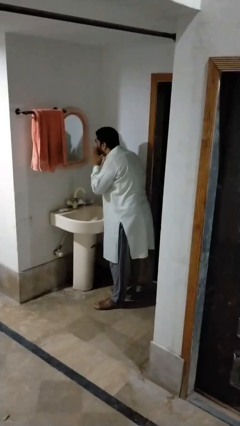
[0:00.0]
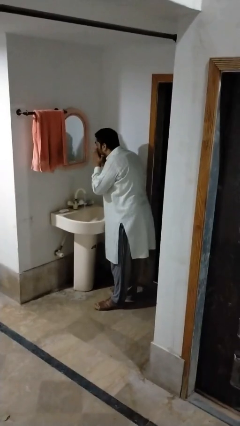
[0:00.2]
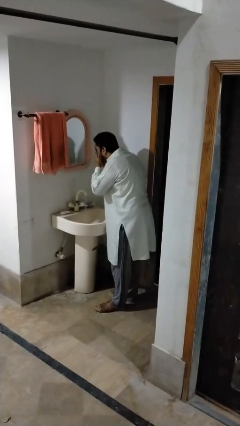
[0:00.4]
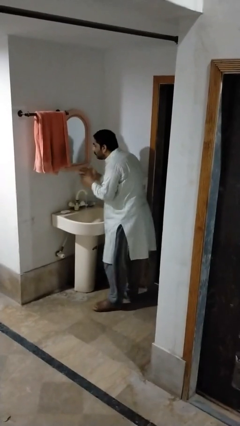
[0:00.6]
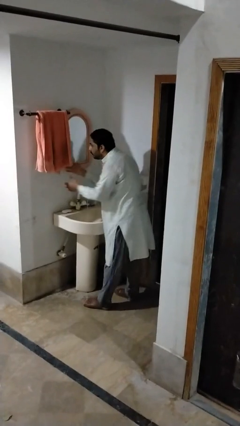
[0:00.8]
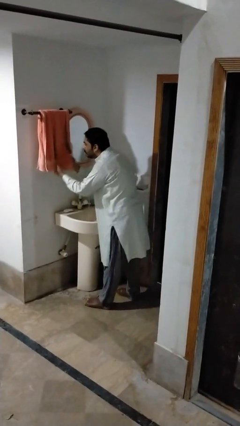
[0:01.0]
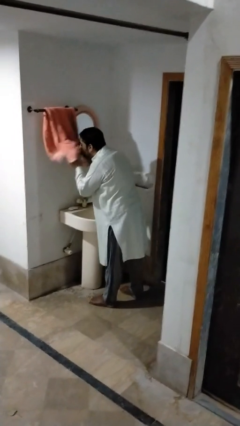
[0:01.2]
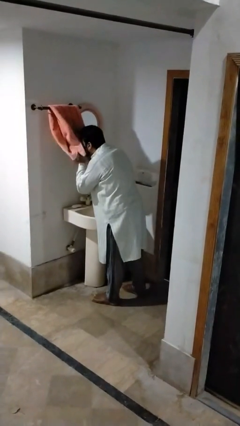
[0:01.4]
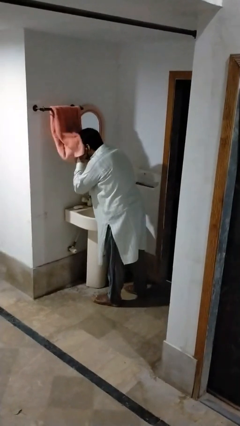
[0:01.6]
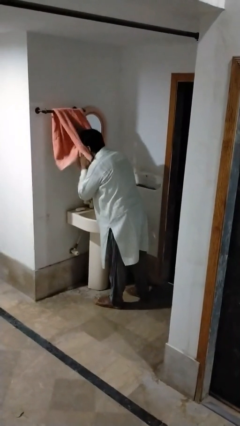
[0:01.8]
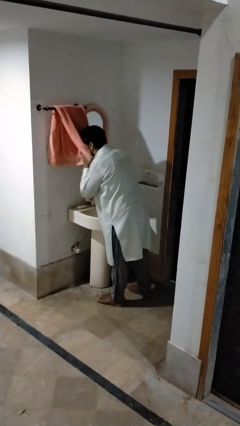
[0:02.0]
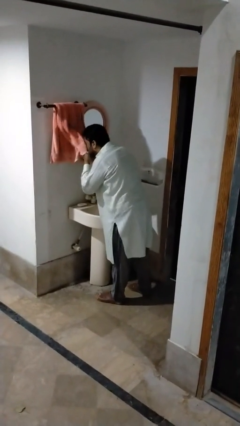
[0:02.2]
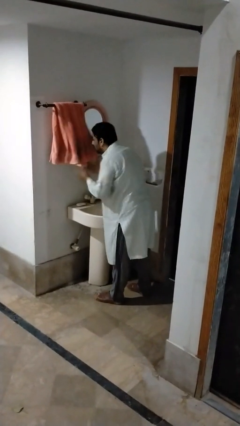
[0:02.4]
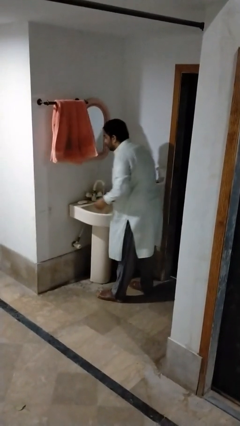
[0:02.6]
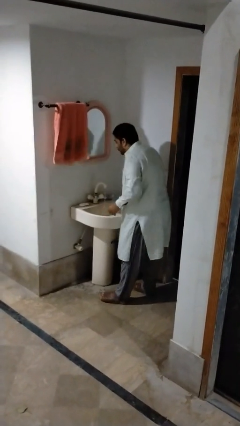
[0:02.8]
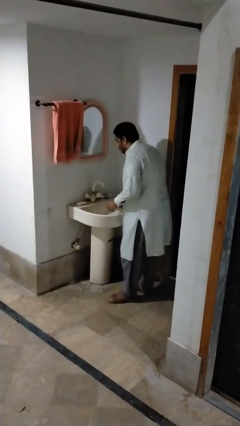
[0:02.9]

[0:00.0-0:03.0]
person dries face with towel

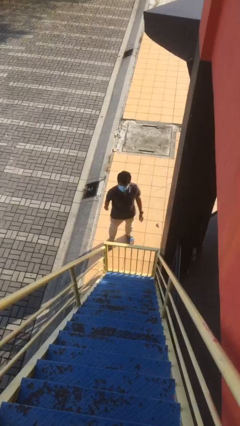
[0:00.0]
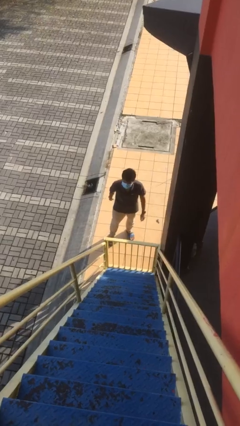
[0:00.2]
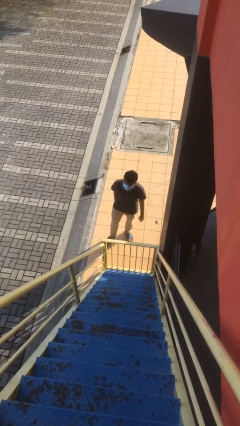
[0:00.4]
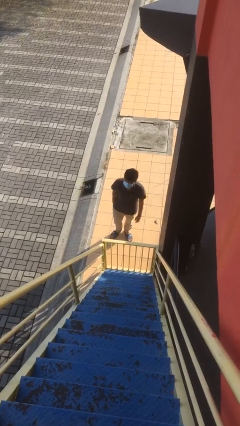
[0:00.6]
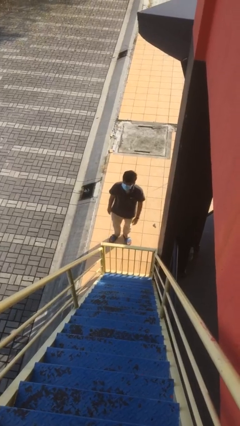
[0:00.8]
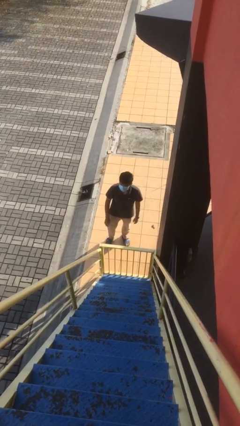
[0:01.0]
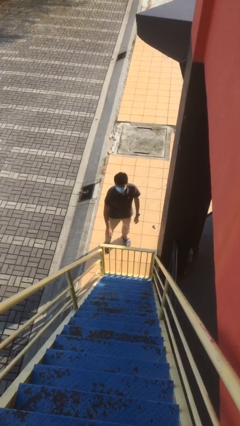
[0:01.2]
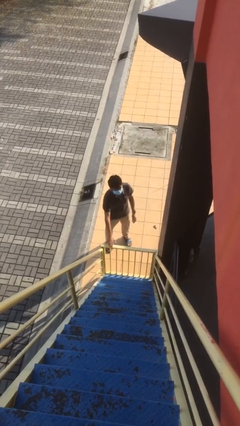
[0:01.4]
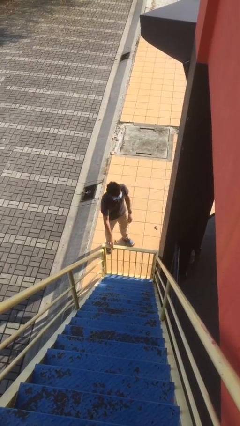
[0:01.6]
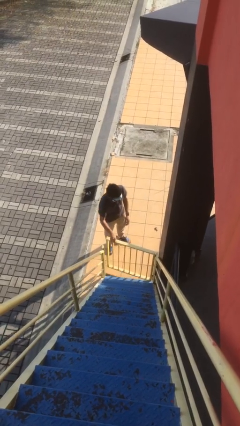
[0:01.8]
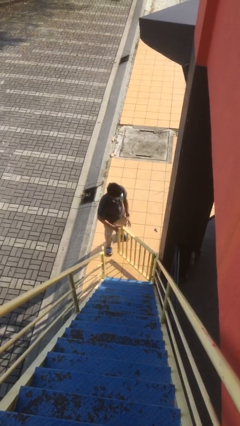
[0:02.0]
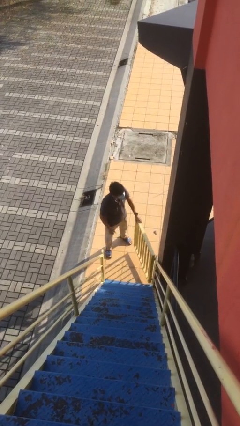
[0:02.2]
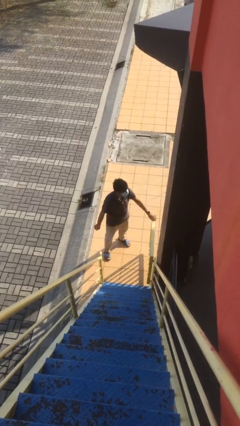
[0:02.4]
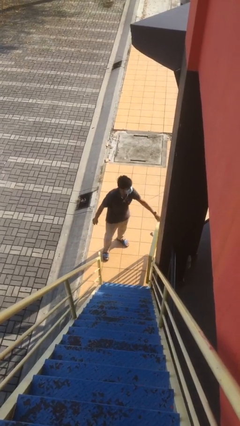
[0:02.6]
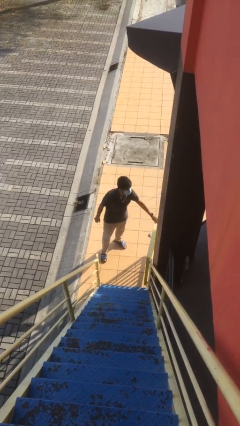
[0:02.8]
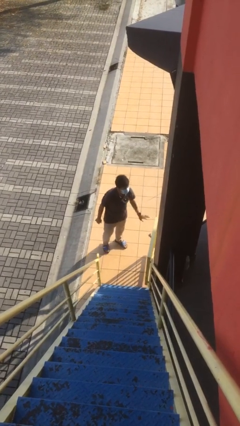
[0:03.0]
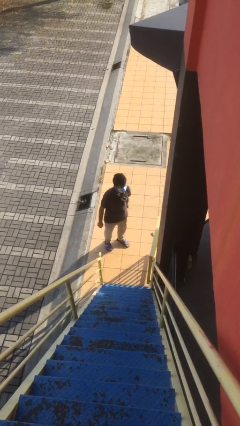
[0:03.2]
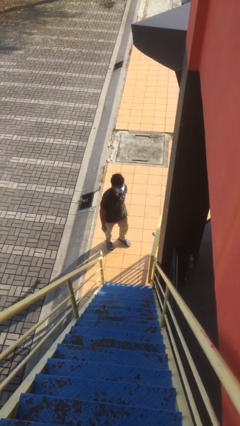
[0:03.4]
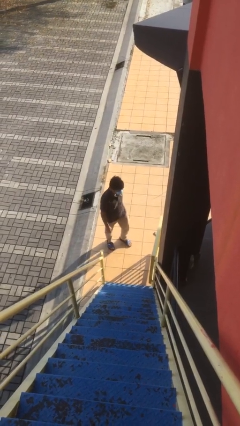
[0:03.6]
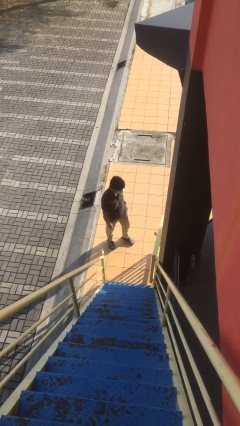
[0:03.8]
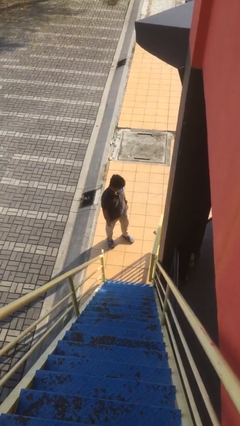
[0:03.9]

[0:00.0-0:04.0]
person opens facility door

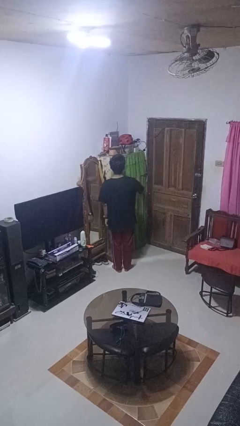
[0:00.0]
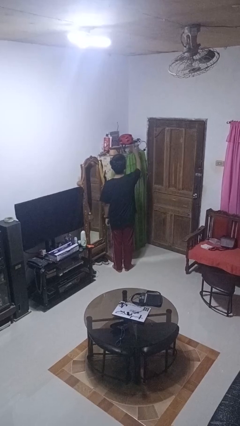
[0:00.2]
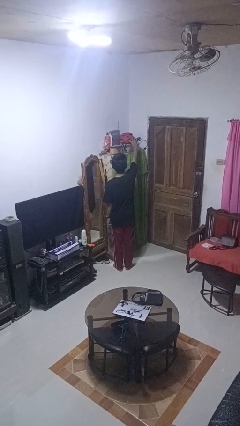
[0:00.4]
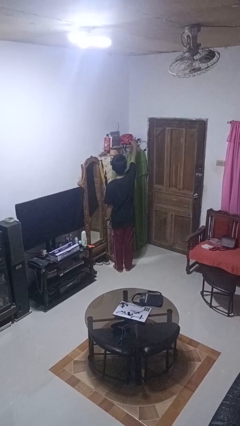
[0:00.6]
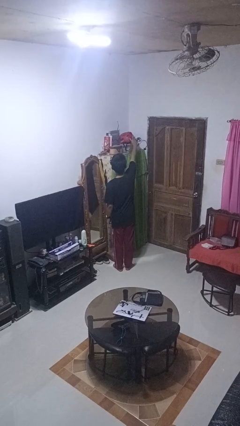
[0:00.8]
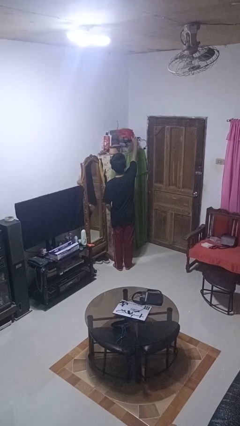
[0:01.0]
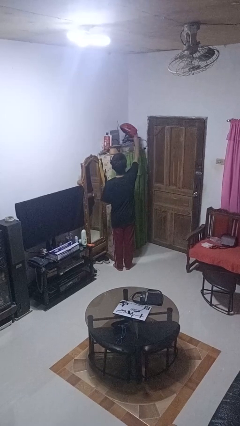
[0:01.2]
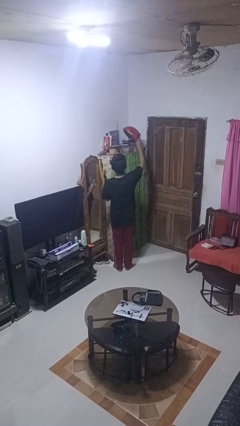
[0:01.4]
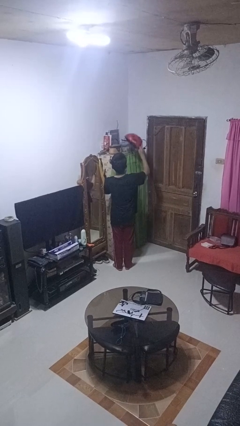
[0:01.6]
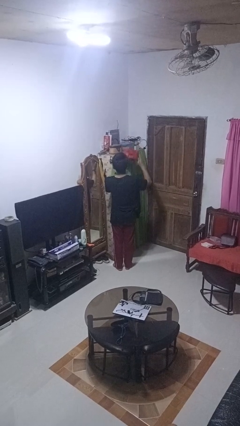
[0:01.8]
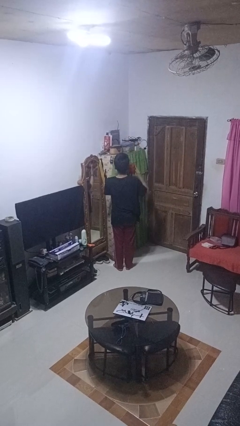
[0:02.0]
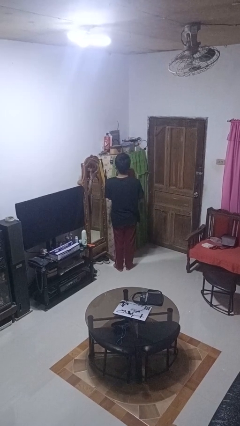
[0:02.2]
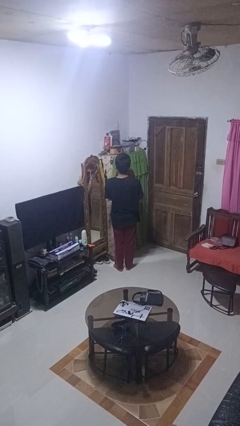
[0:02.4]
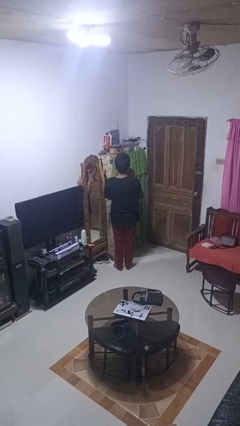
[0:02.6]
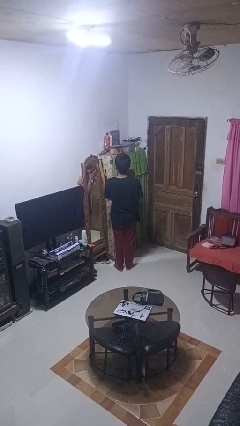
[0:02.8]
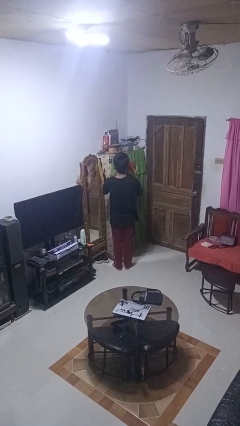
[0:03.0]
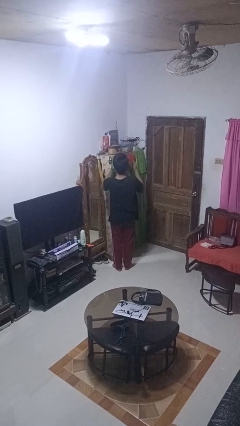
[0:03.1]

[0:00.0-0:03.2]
person picks up object from shelf

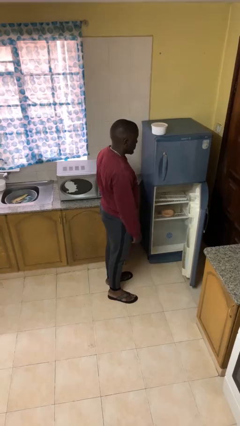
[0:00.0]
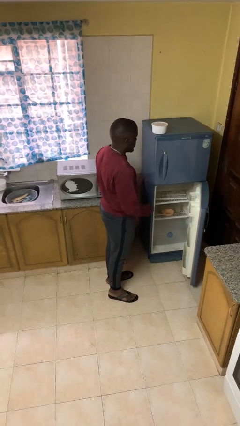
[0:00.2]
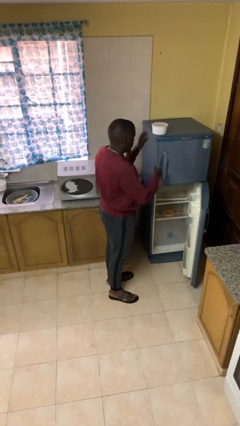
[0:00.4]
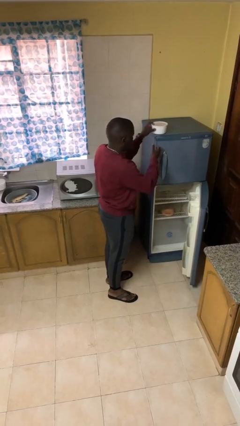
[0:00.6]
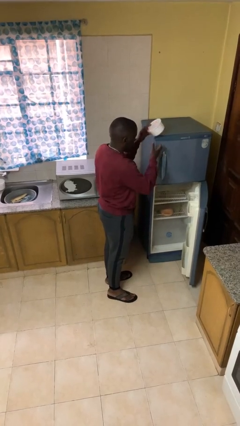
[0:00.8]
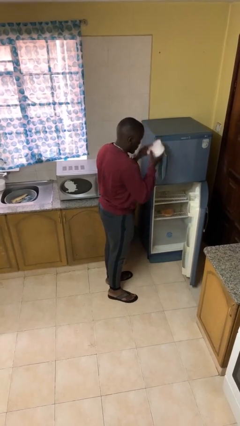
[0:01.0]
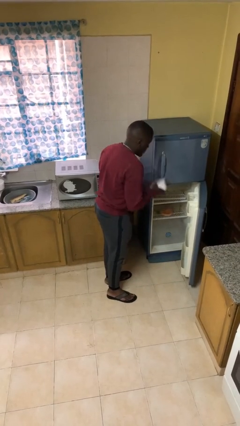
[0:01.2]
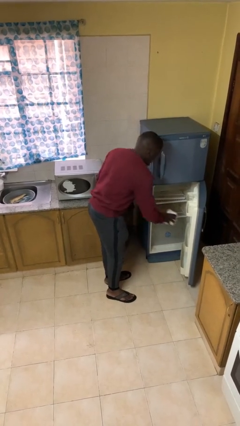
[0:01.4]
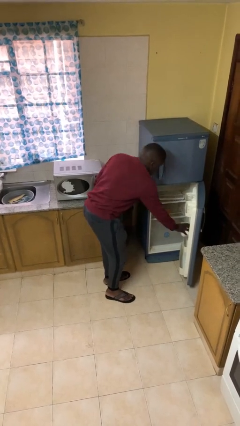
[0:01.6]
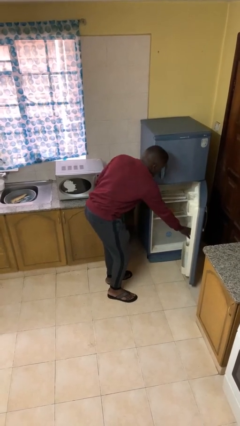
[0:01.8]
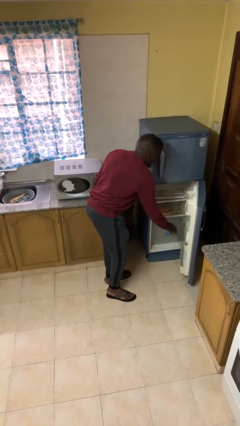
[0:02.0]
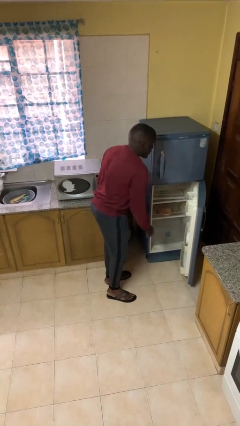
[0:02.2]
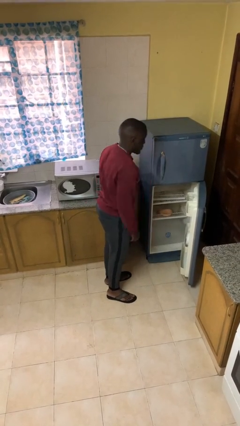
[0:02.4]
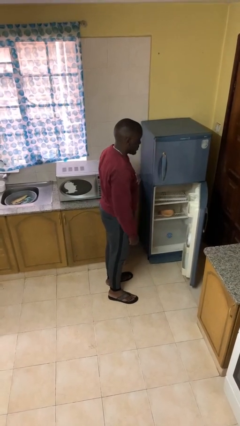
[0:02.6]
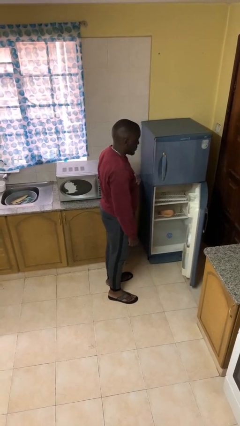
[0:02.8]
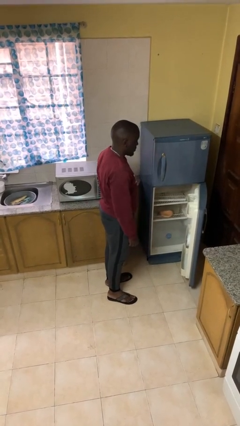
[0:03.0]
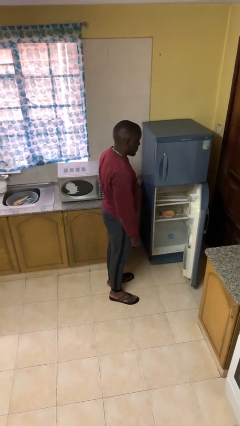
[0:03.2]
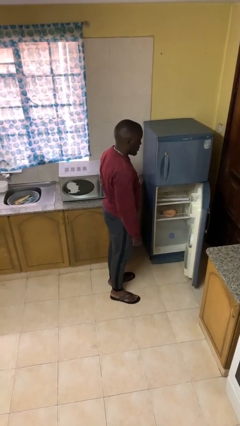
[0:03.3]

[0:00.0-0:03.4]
person puts object into refrigerator

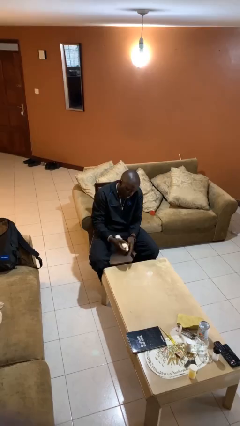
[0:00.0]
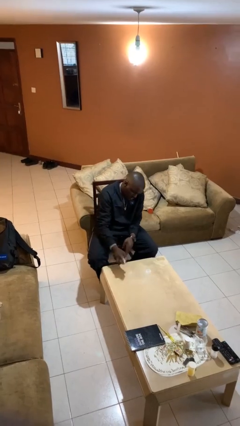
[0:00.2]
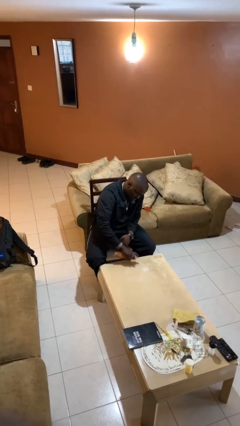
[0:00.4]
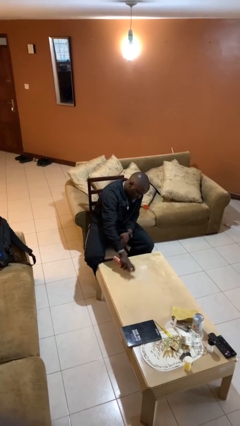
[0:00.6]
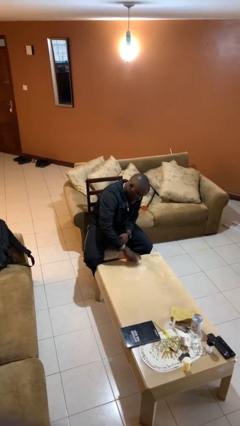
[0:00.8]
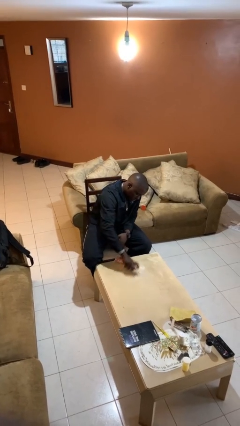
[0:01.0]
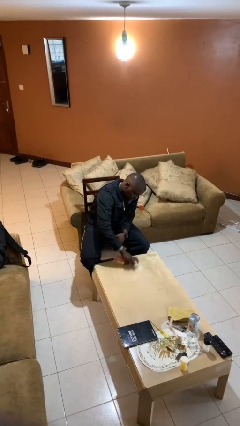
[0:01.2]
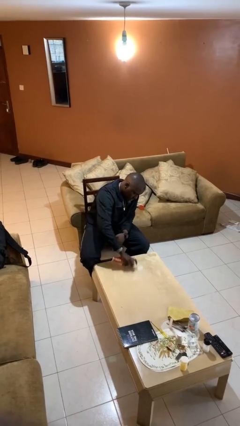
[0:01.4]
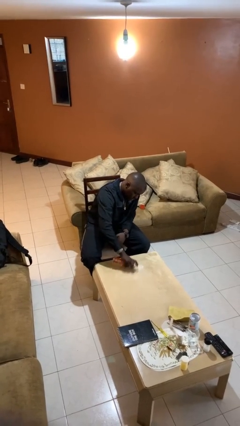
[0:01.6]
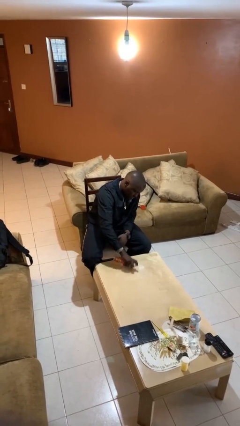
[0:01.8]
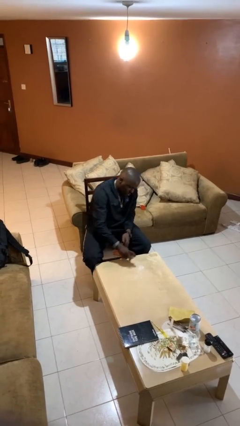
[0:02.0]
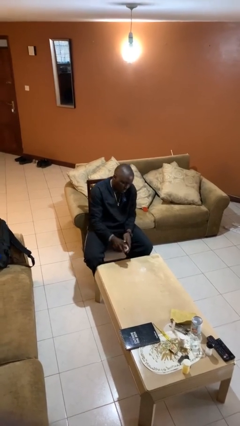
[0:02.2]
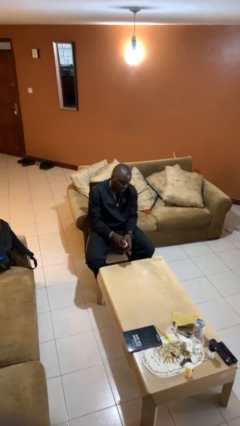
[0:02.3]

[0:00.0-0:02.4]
person sprays from bottle

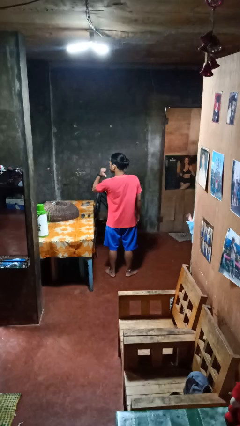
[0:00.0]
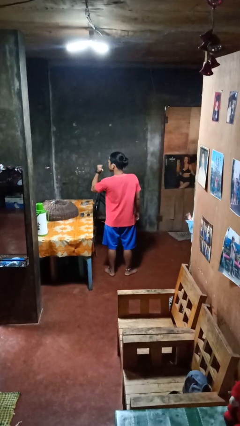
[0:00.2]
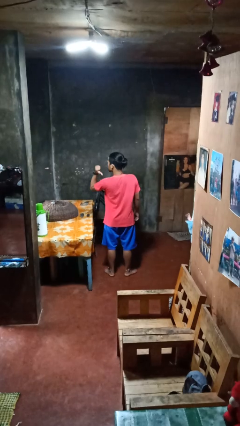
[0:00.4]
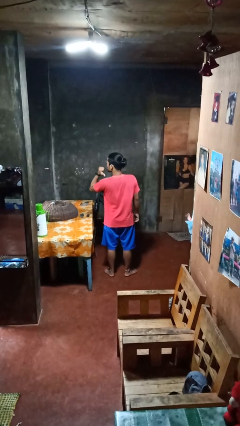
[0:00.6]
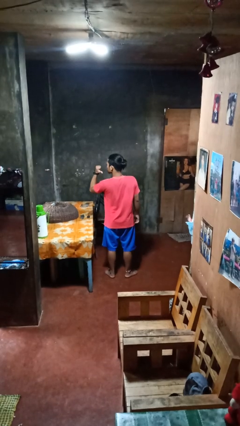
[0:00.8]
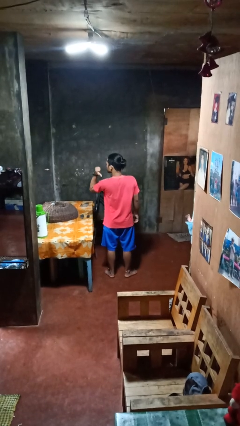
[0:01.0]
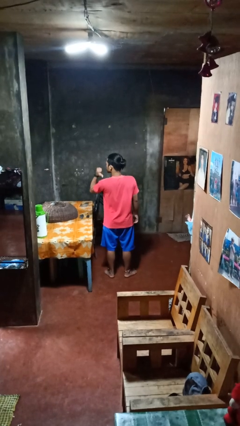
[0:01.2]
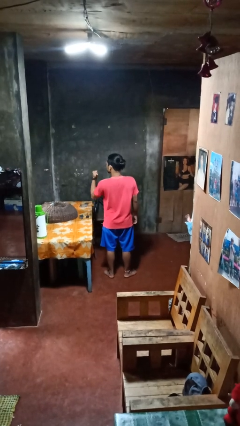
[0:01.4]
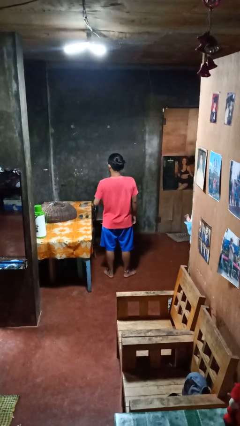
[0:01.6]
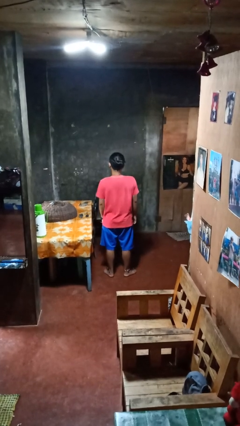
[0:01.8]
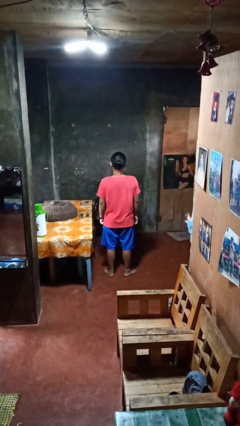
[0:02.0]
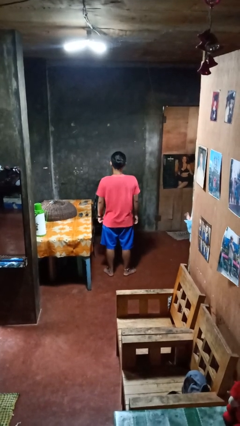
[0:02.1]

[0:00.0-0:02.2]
person gestures behind me
